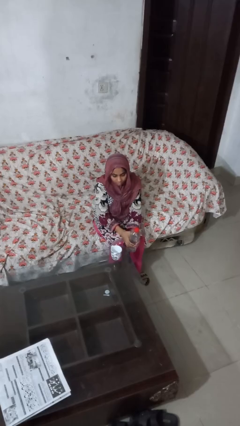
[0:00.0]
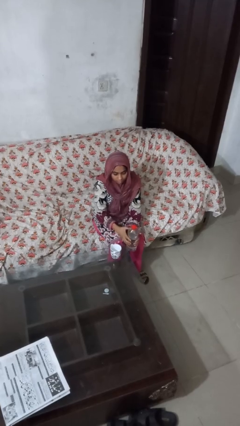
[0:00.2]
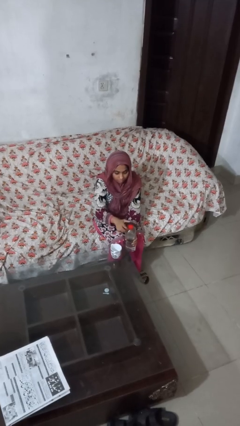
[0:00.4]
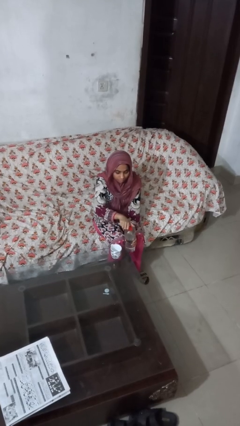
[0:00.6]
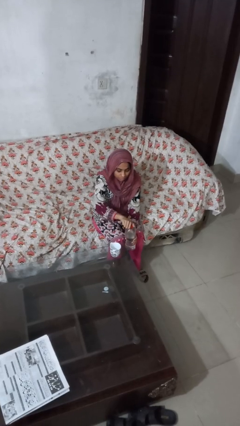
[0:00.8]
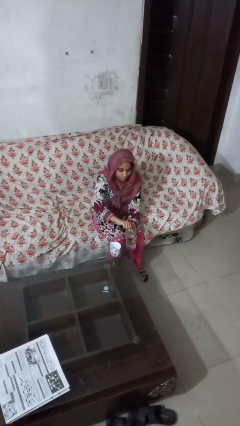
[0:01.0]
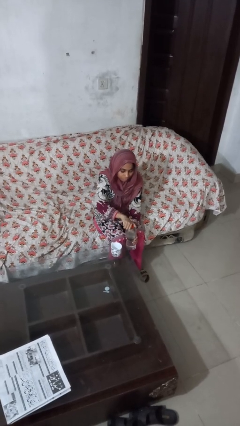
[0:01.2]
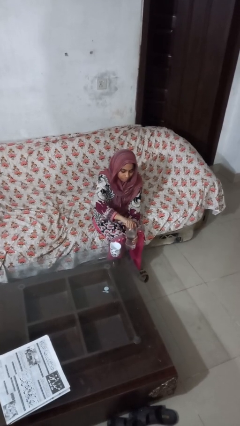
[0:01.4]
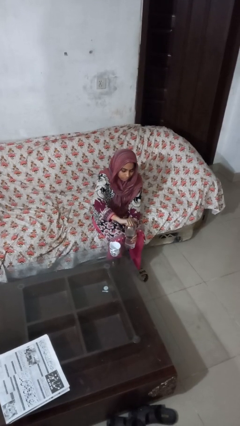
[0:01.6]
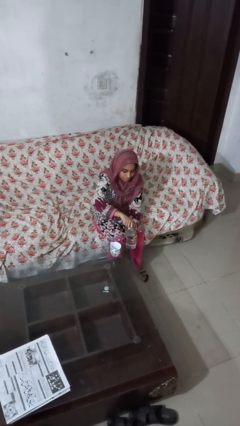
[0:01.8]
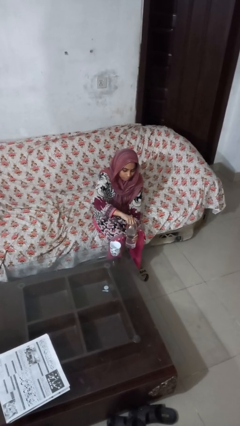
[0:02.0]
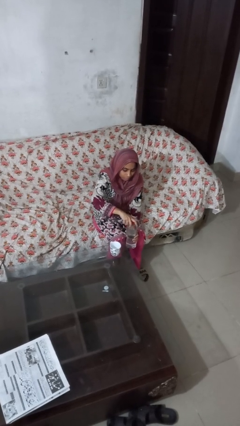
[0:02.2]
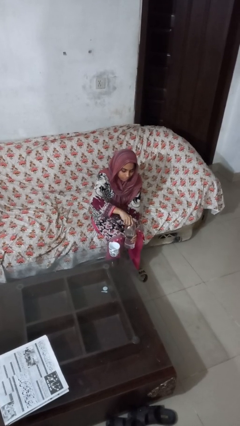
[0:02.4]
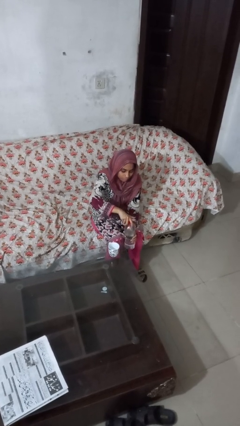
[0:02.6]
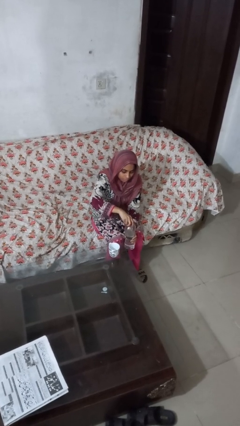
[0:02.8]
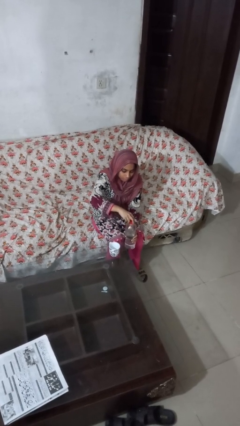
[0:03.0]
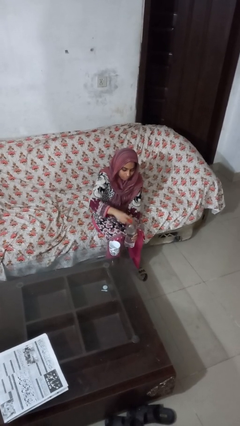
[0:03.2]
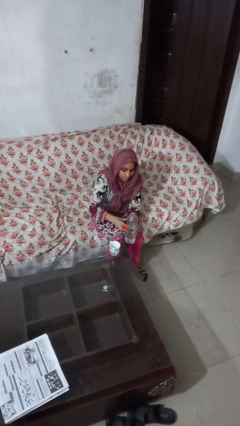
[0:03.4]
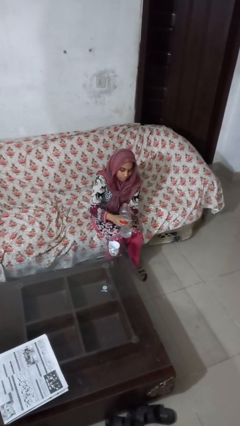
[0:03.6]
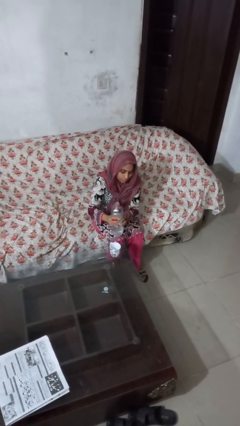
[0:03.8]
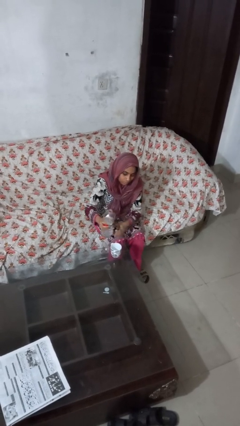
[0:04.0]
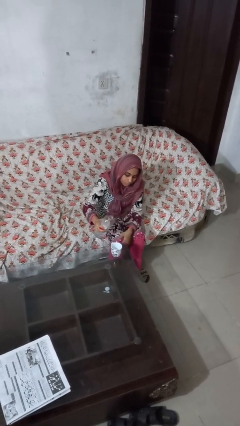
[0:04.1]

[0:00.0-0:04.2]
person unscrews lid from bottle

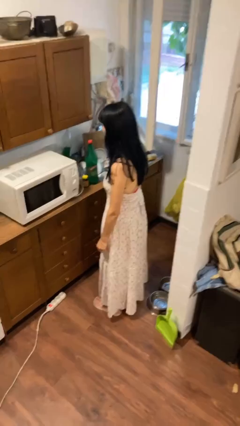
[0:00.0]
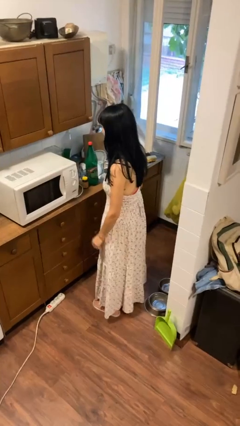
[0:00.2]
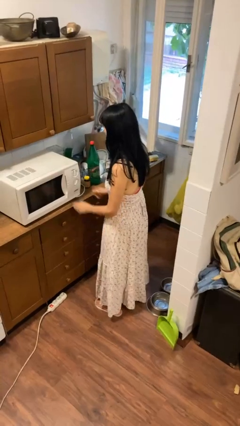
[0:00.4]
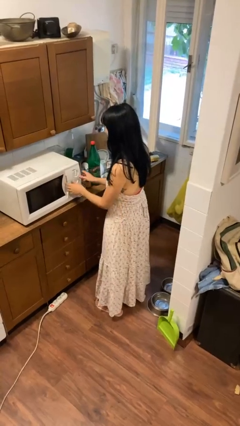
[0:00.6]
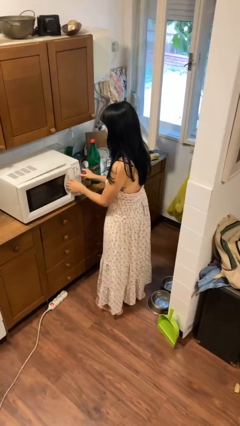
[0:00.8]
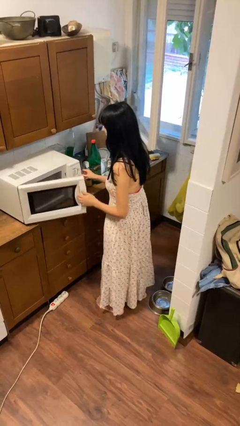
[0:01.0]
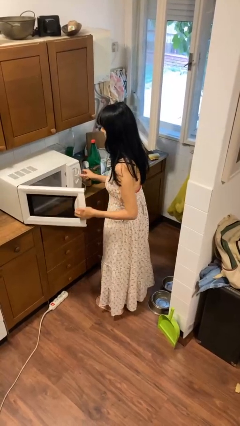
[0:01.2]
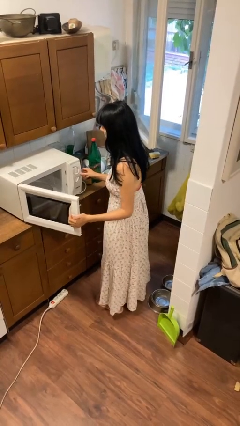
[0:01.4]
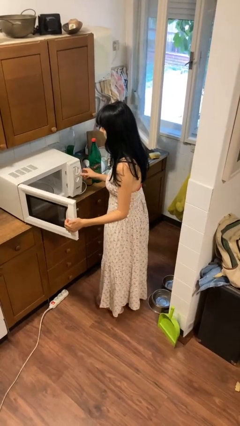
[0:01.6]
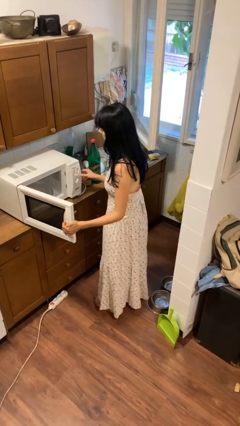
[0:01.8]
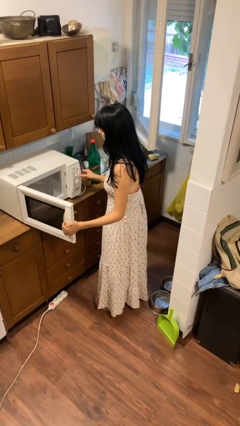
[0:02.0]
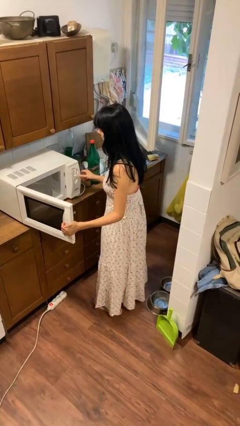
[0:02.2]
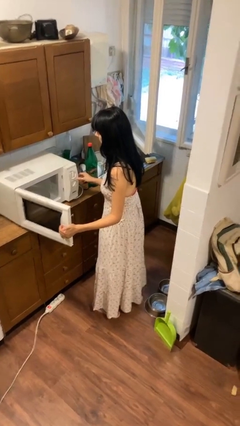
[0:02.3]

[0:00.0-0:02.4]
person opens microwave

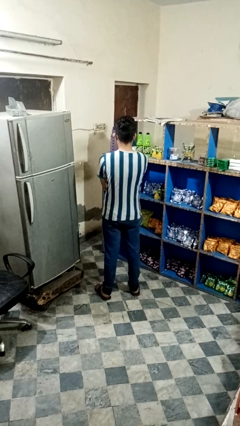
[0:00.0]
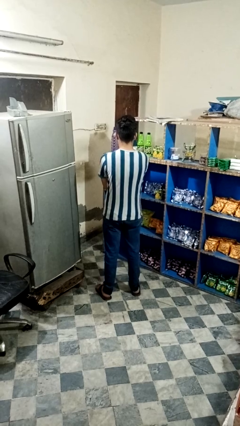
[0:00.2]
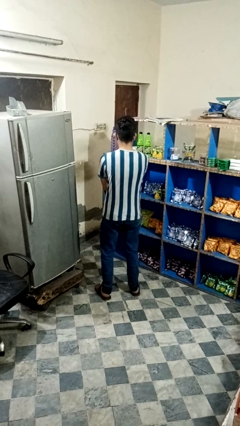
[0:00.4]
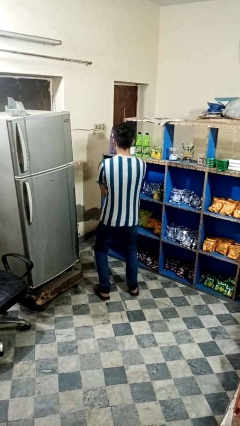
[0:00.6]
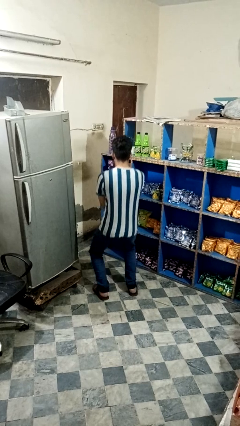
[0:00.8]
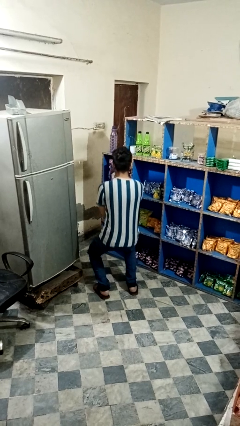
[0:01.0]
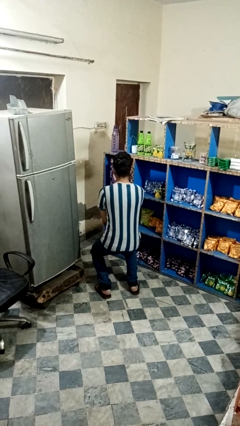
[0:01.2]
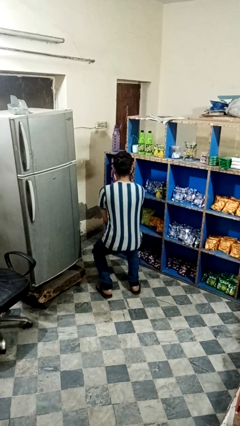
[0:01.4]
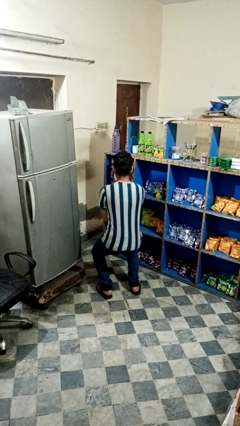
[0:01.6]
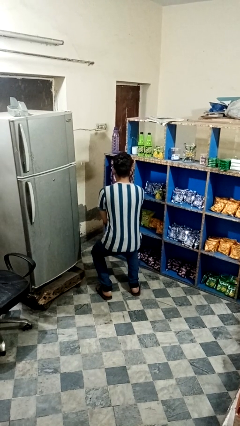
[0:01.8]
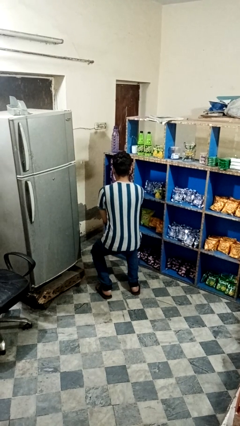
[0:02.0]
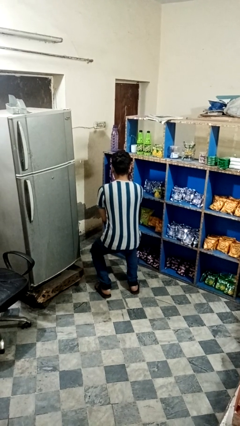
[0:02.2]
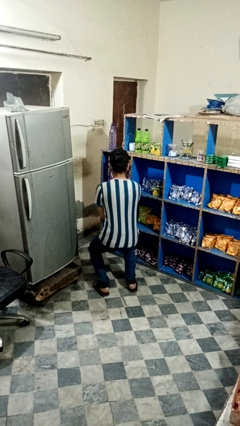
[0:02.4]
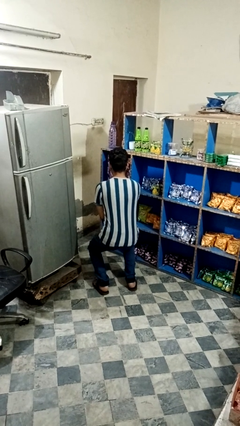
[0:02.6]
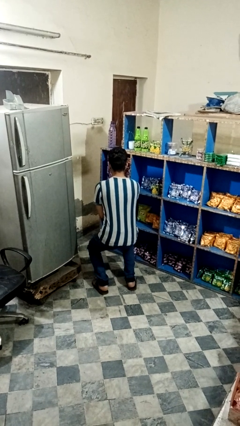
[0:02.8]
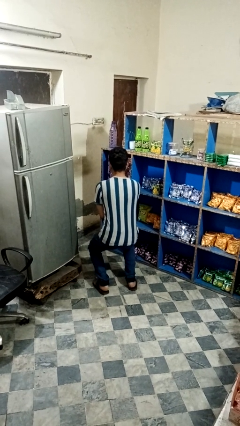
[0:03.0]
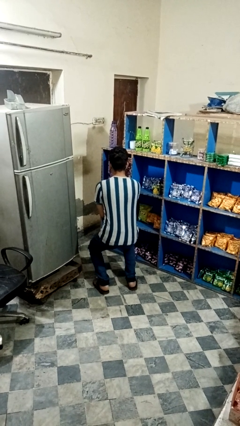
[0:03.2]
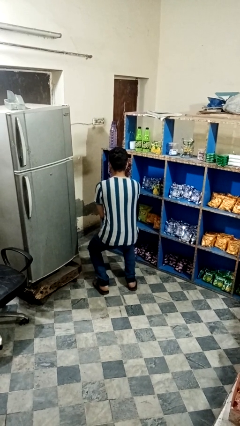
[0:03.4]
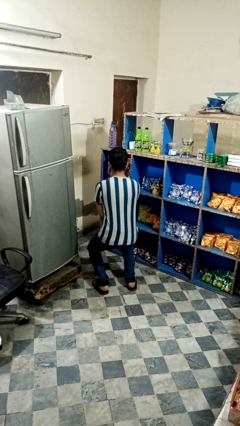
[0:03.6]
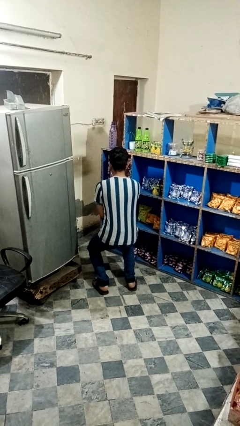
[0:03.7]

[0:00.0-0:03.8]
person squats

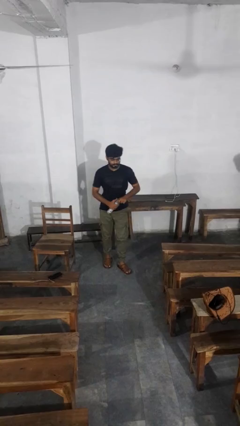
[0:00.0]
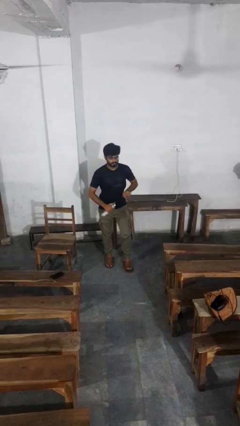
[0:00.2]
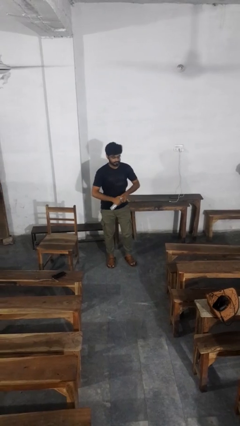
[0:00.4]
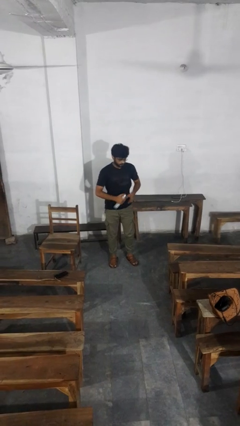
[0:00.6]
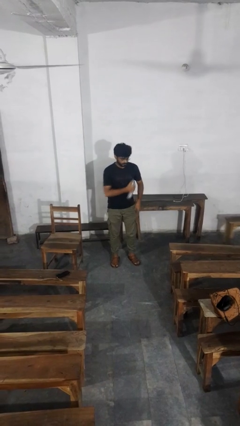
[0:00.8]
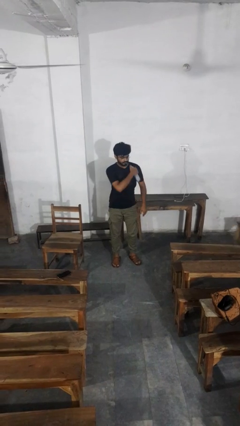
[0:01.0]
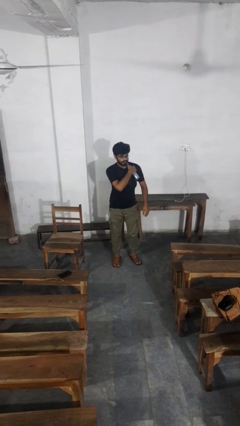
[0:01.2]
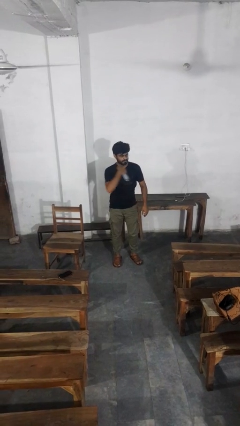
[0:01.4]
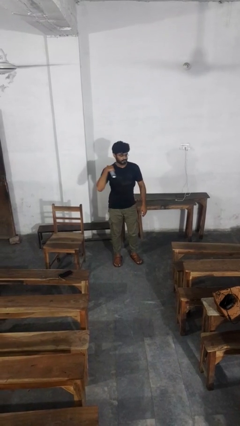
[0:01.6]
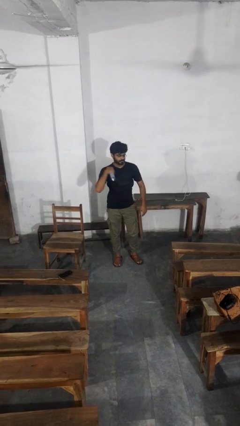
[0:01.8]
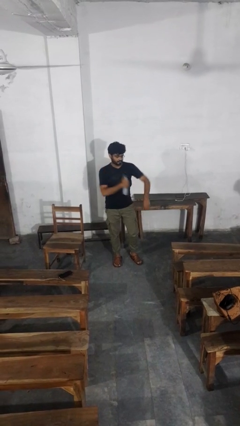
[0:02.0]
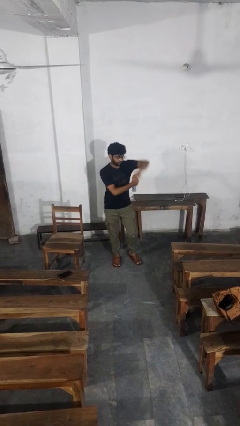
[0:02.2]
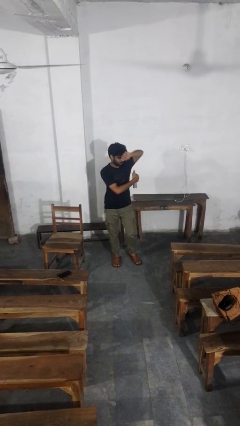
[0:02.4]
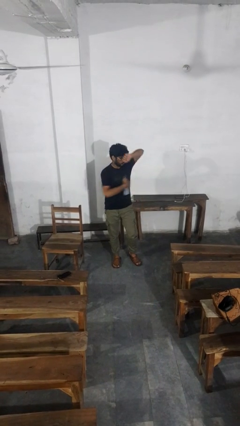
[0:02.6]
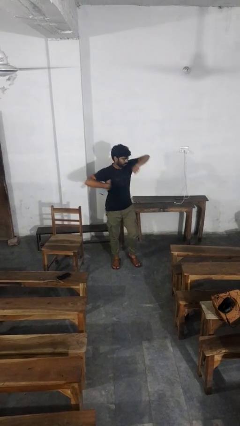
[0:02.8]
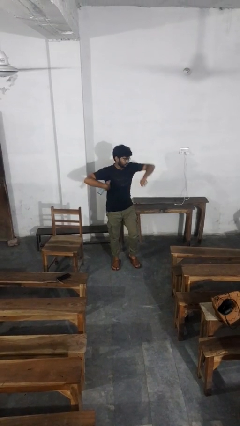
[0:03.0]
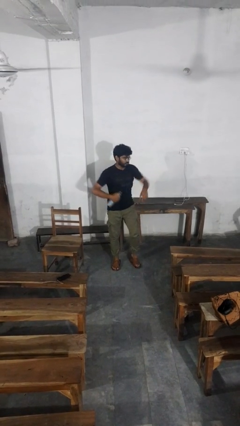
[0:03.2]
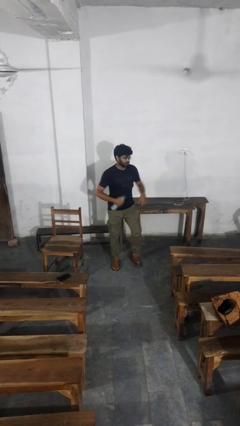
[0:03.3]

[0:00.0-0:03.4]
person applies deodorant

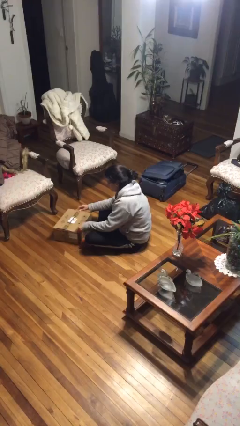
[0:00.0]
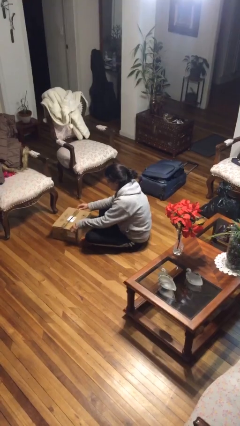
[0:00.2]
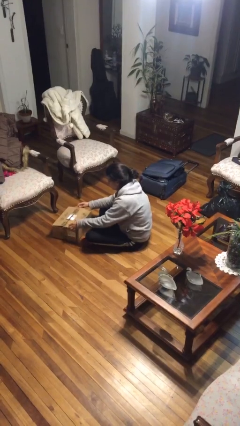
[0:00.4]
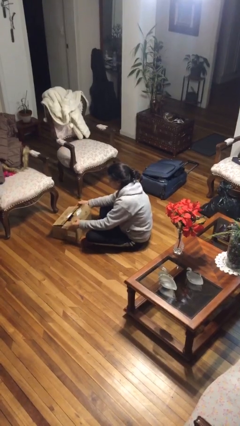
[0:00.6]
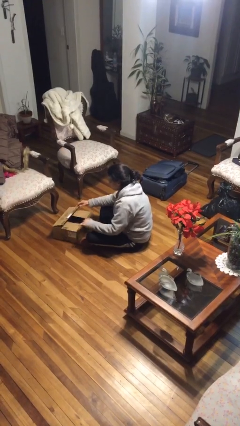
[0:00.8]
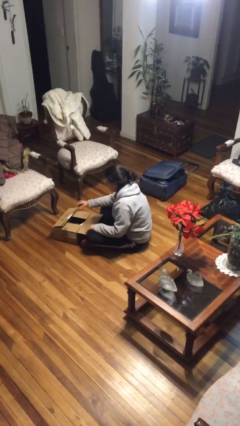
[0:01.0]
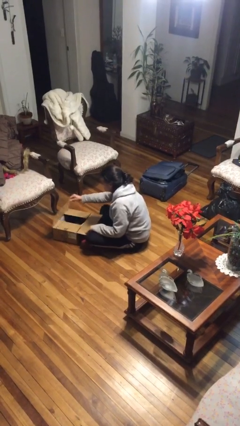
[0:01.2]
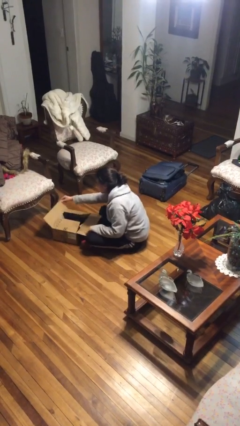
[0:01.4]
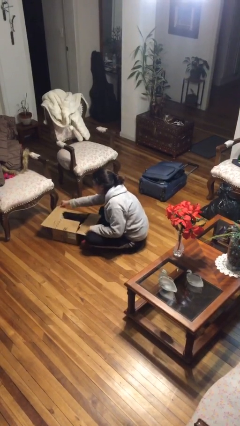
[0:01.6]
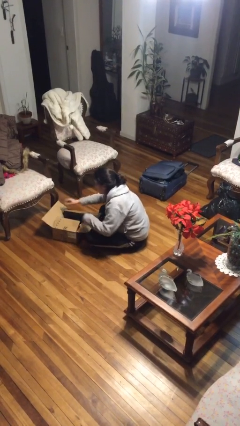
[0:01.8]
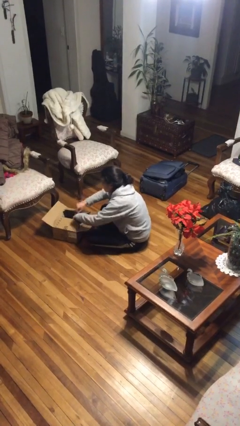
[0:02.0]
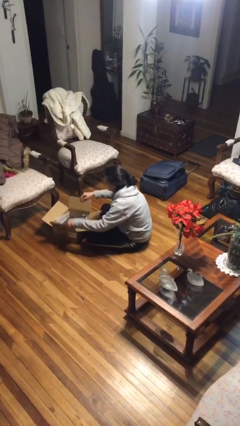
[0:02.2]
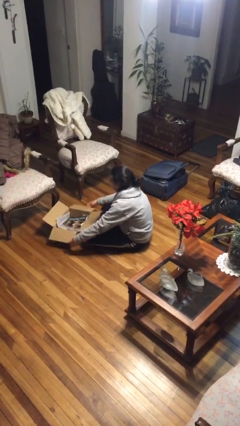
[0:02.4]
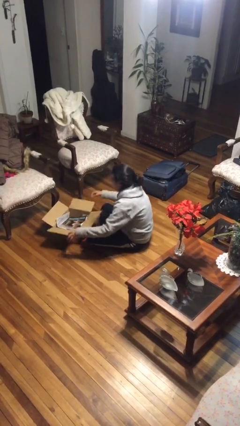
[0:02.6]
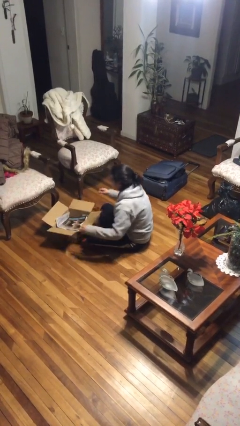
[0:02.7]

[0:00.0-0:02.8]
person opens box

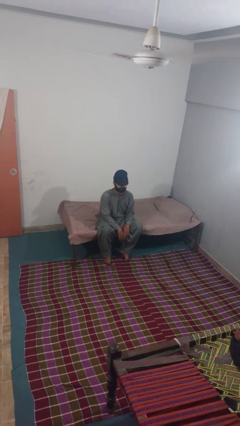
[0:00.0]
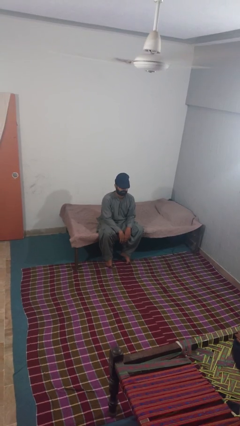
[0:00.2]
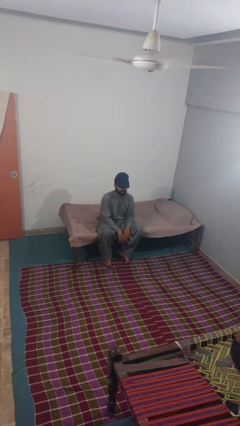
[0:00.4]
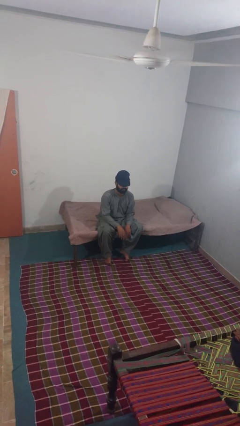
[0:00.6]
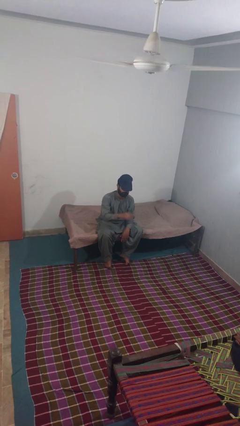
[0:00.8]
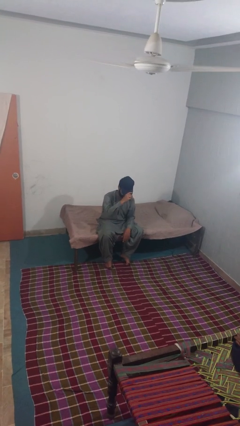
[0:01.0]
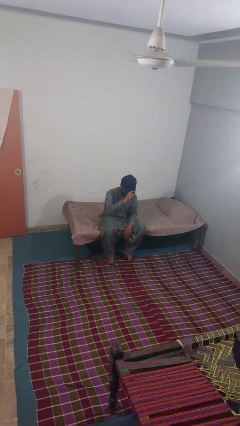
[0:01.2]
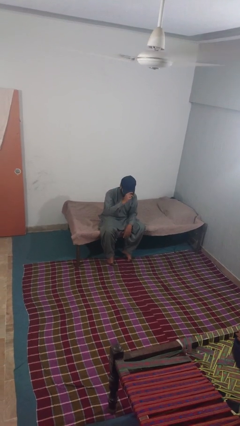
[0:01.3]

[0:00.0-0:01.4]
person takes off hat
